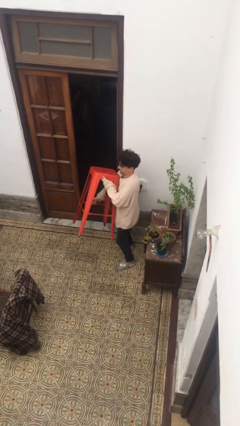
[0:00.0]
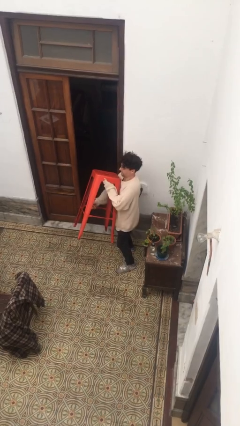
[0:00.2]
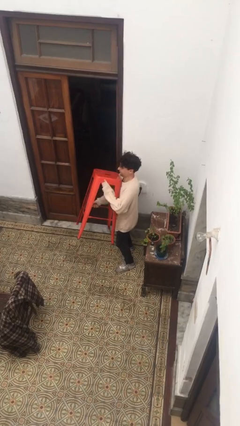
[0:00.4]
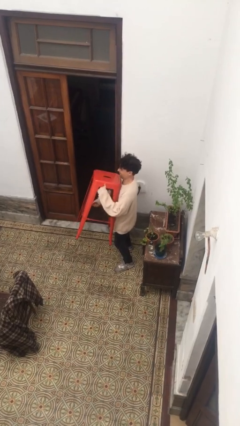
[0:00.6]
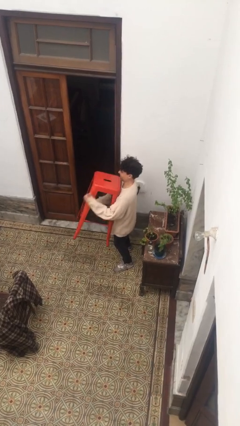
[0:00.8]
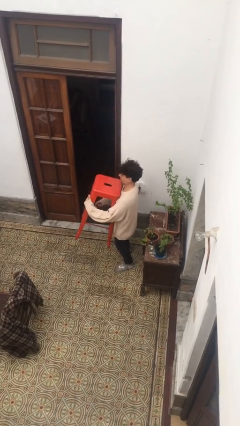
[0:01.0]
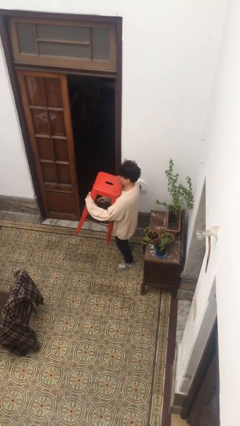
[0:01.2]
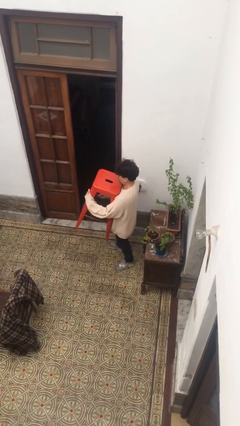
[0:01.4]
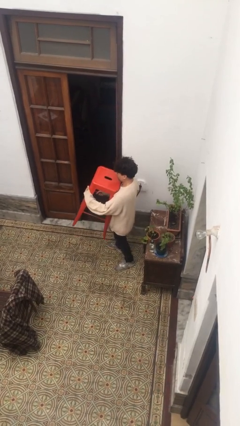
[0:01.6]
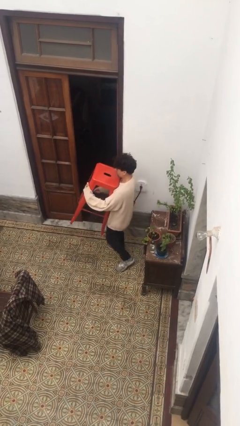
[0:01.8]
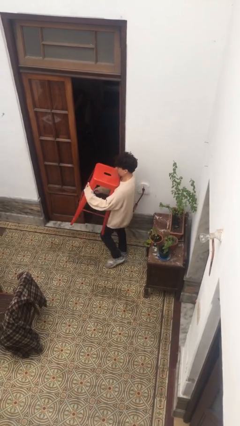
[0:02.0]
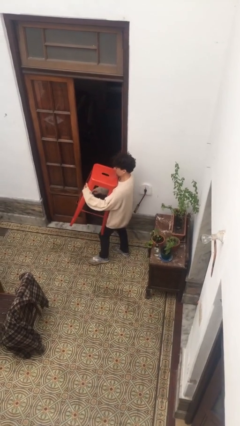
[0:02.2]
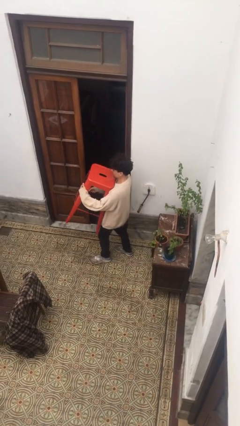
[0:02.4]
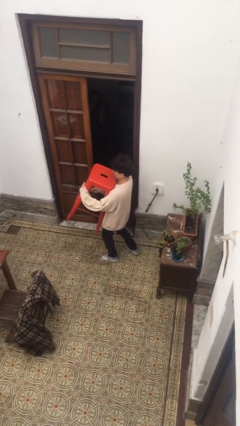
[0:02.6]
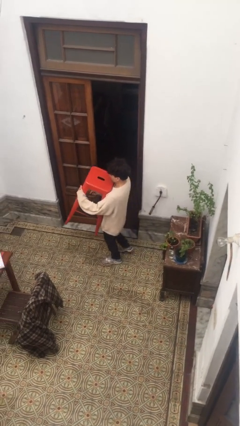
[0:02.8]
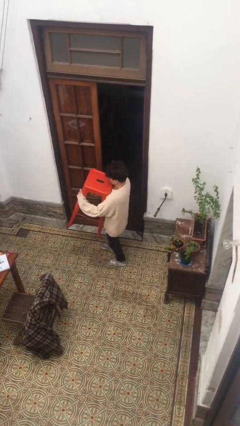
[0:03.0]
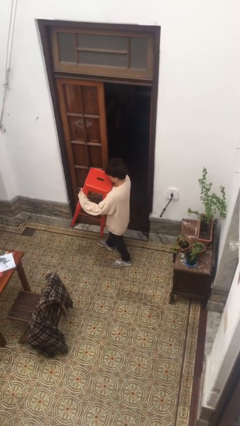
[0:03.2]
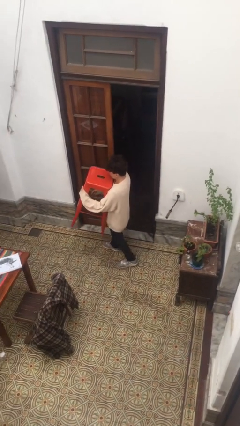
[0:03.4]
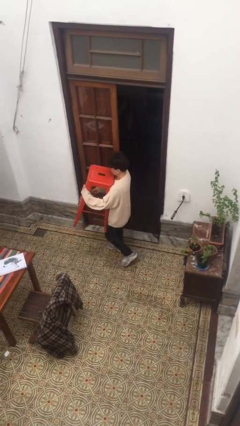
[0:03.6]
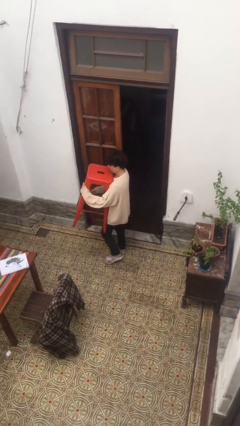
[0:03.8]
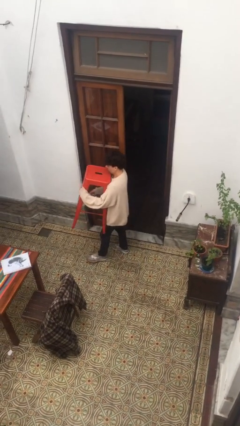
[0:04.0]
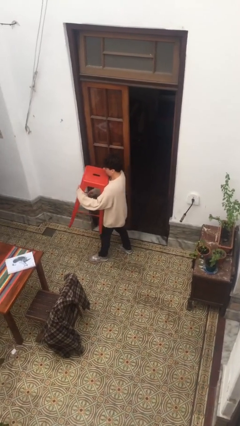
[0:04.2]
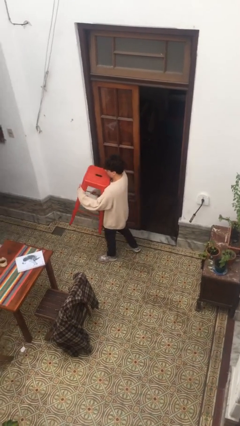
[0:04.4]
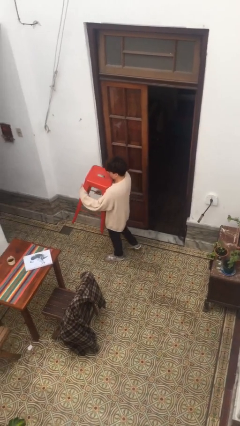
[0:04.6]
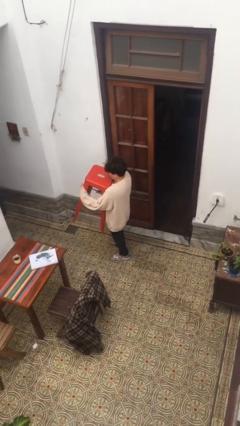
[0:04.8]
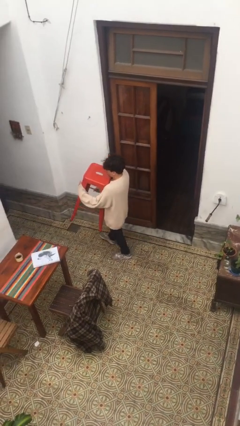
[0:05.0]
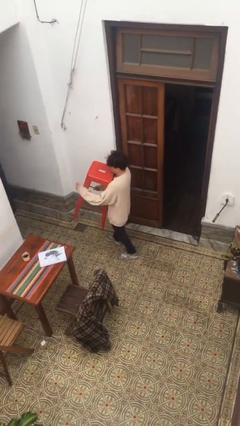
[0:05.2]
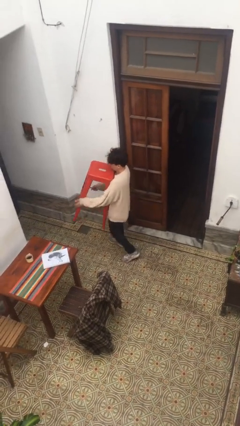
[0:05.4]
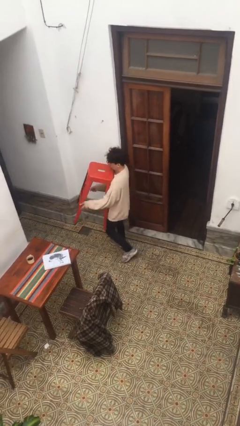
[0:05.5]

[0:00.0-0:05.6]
person carries heavy object

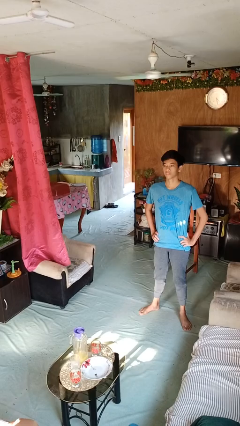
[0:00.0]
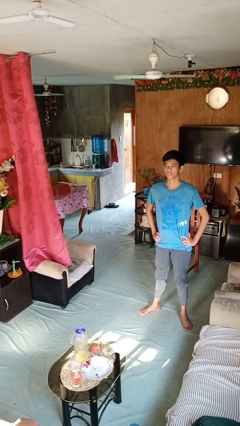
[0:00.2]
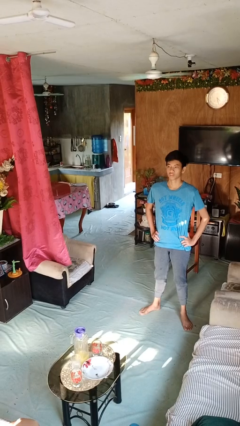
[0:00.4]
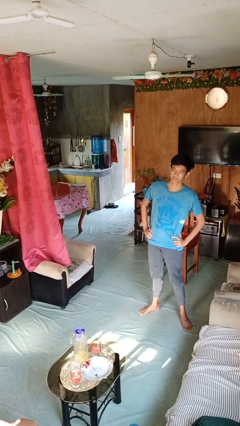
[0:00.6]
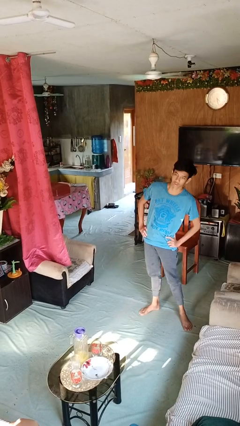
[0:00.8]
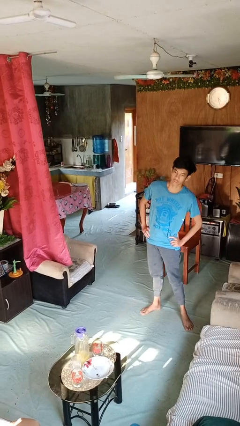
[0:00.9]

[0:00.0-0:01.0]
person wiggles hips

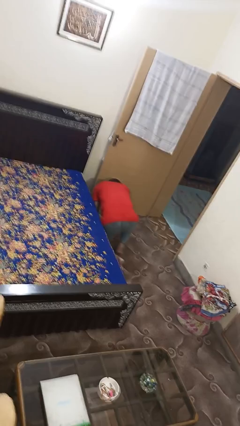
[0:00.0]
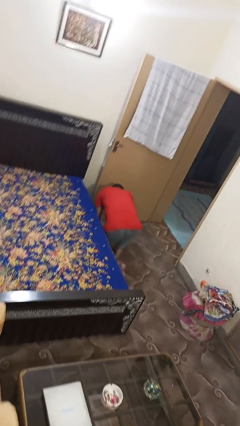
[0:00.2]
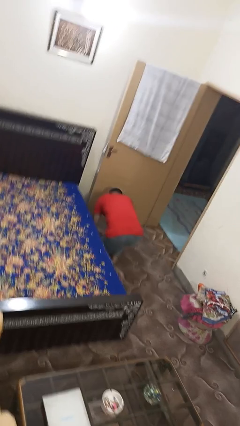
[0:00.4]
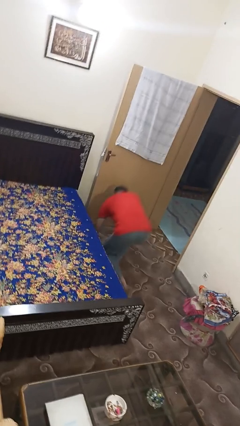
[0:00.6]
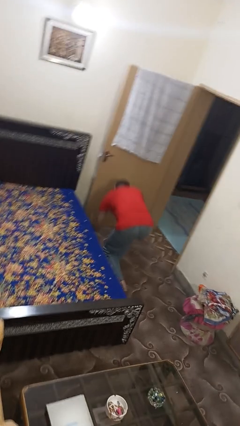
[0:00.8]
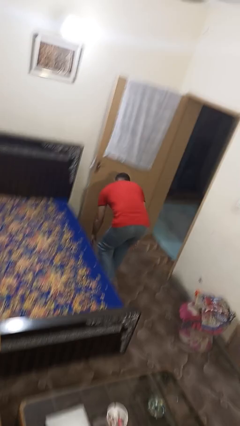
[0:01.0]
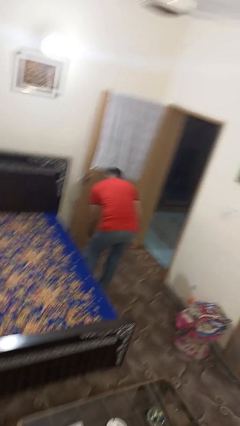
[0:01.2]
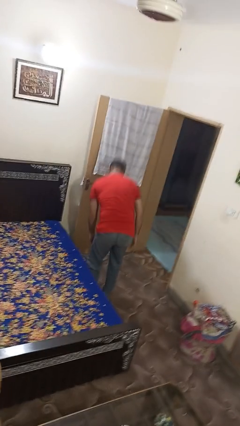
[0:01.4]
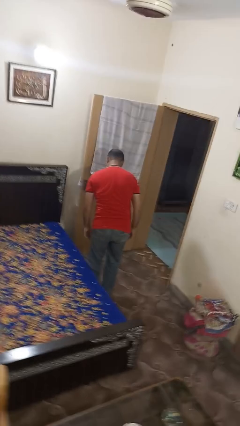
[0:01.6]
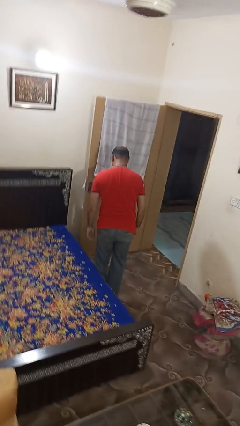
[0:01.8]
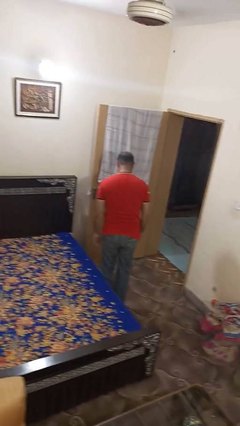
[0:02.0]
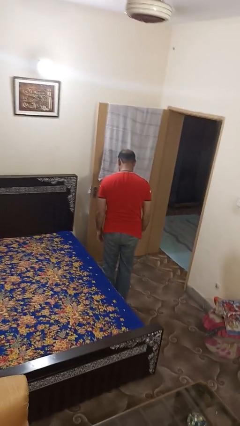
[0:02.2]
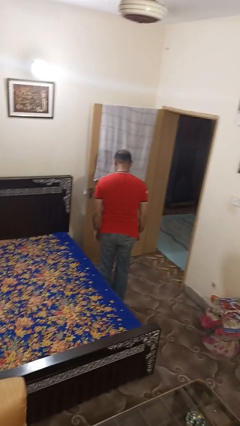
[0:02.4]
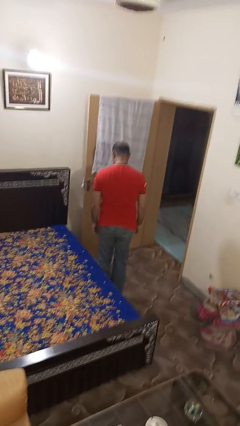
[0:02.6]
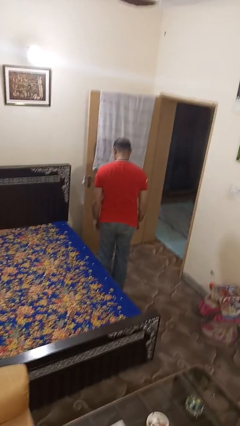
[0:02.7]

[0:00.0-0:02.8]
person stands up from floor

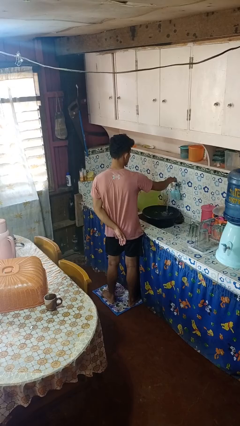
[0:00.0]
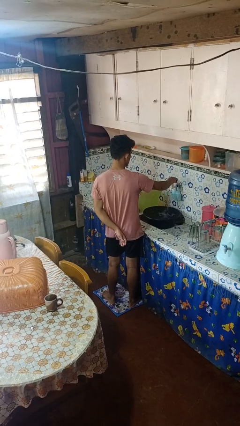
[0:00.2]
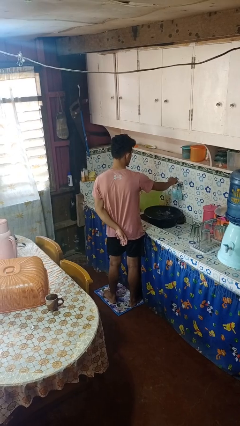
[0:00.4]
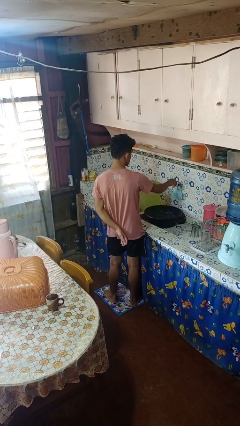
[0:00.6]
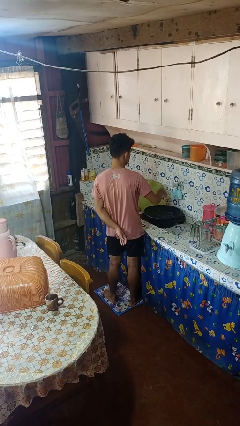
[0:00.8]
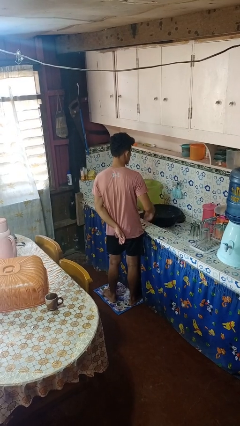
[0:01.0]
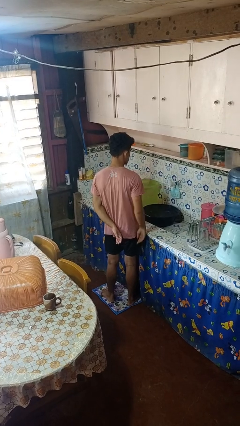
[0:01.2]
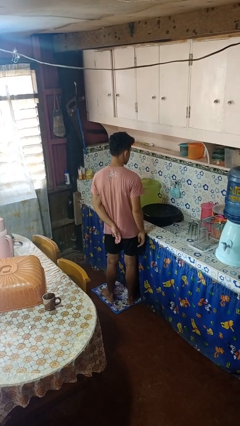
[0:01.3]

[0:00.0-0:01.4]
person turns off faucet

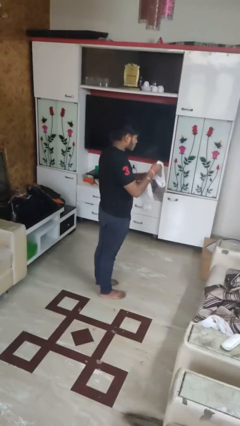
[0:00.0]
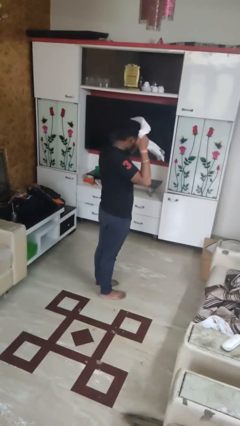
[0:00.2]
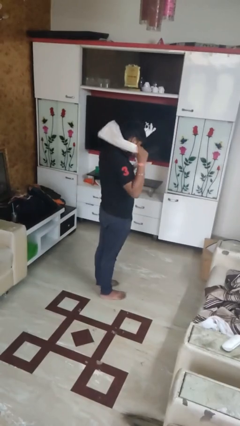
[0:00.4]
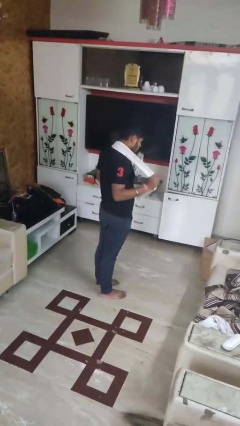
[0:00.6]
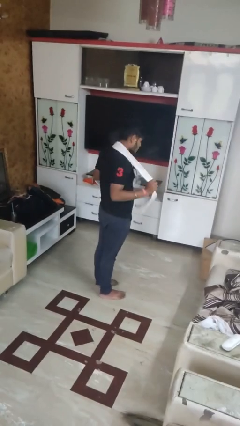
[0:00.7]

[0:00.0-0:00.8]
person puts on scarf

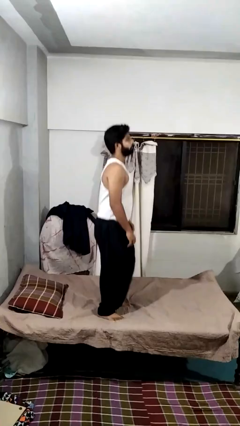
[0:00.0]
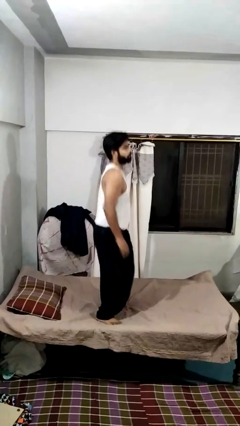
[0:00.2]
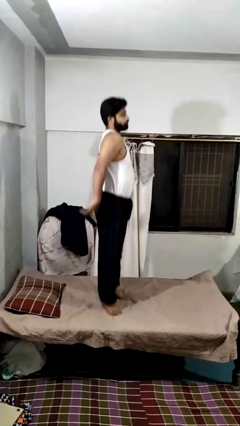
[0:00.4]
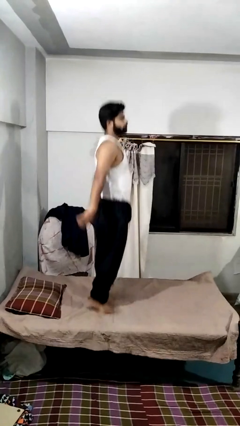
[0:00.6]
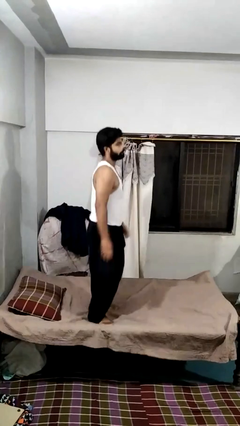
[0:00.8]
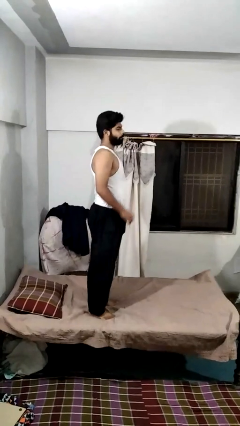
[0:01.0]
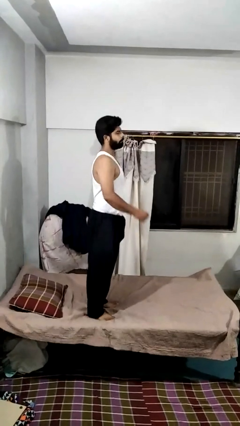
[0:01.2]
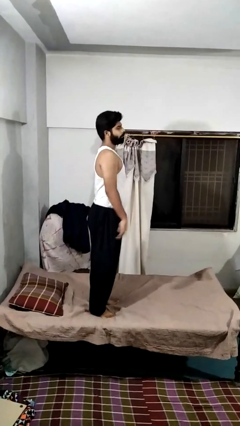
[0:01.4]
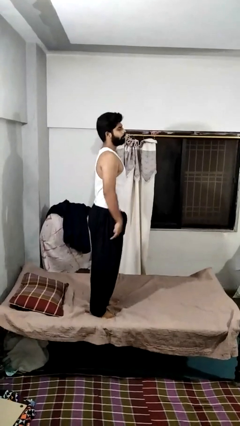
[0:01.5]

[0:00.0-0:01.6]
person jumps on bed

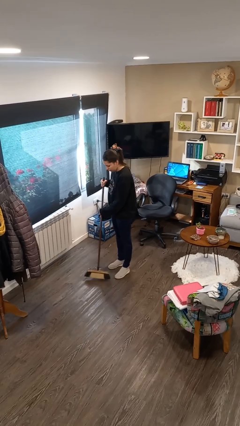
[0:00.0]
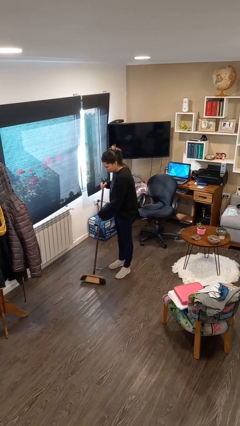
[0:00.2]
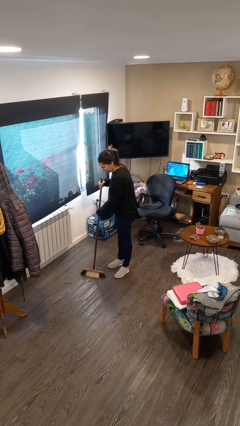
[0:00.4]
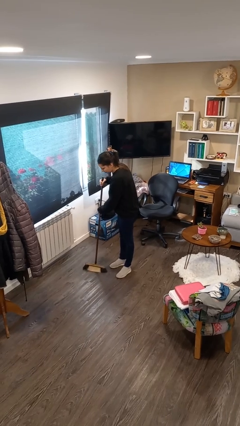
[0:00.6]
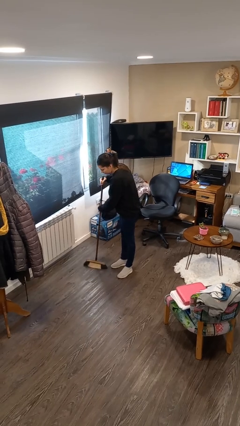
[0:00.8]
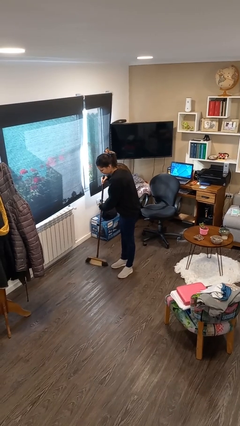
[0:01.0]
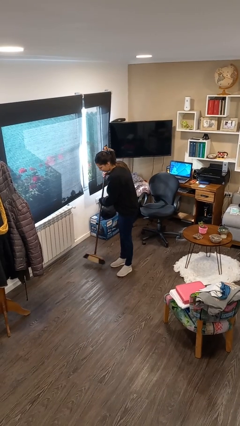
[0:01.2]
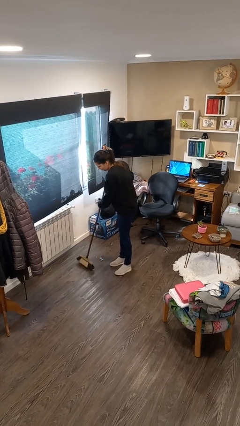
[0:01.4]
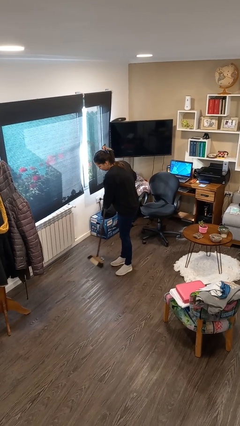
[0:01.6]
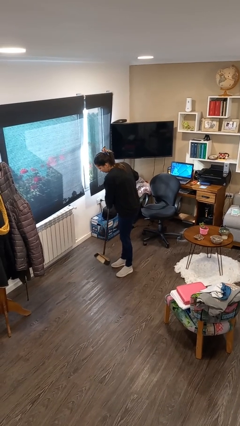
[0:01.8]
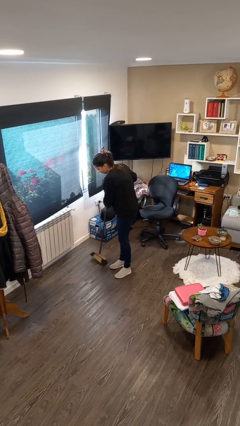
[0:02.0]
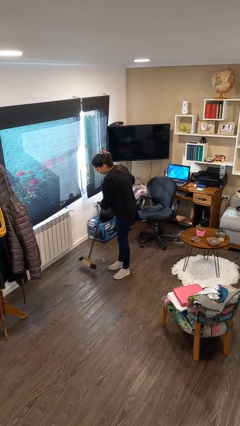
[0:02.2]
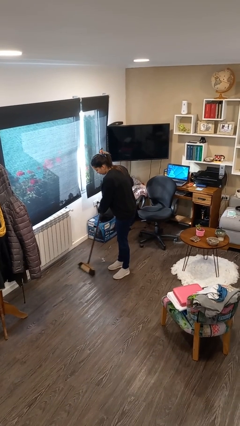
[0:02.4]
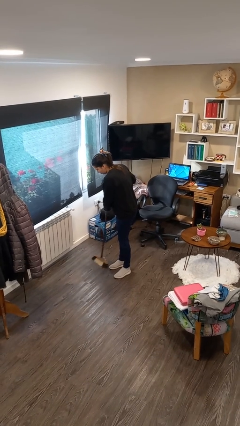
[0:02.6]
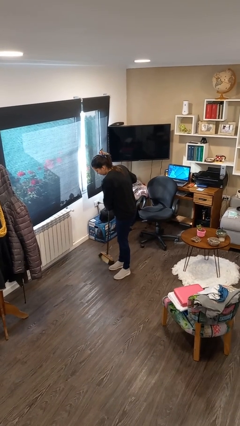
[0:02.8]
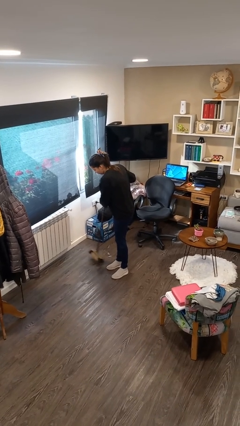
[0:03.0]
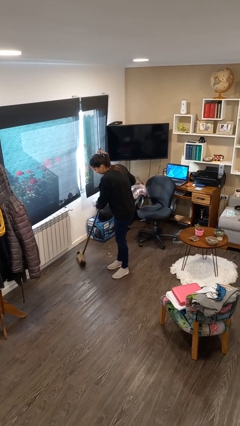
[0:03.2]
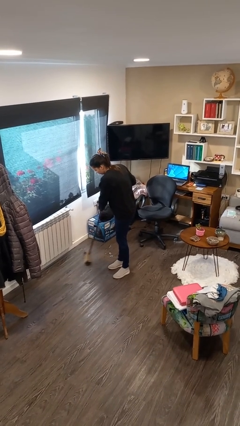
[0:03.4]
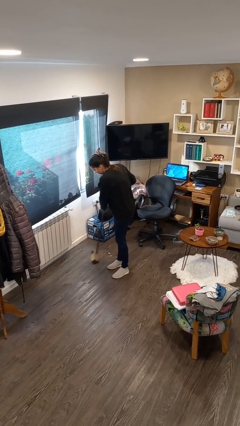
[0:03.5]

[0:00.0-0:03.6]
person sweeps floor

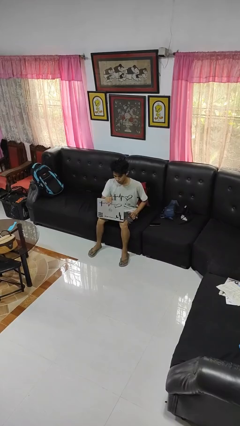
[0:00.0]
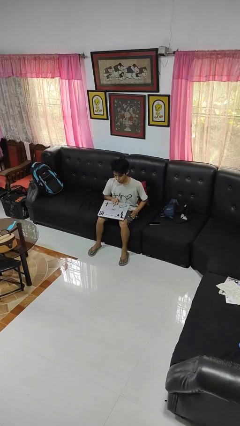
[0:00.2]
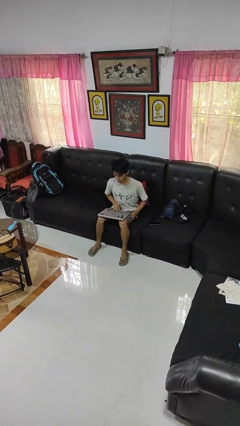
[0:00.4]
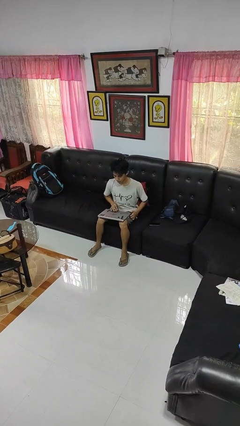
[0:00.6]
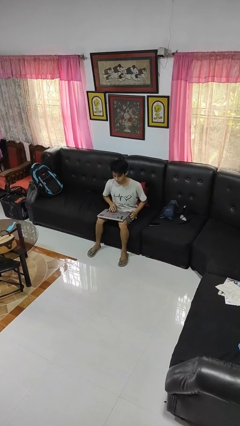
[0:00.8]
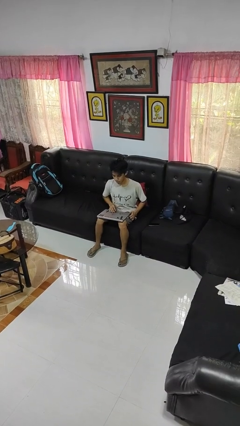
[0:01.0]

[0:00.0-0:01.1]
person closes laptop
